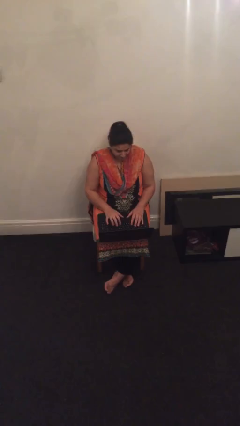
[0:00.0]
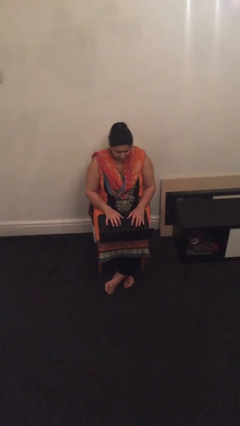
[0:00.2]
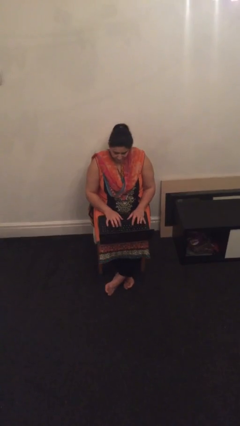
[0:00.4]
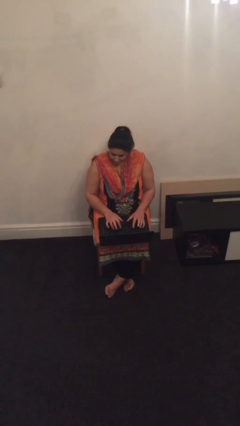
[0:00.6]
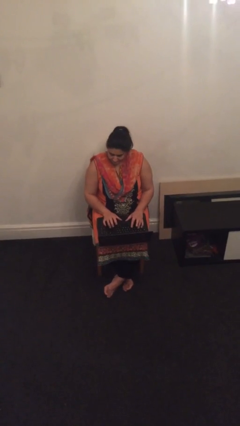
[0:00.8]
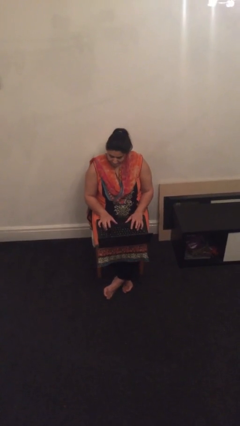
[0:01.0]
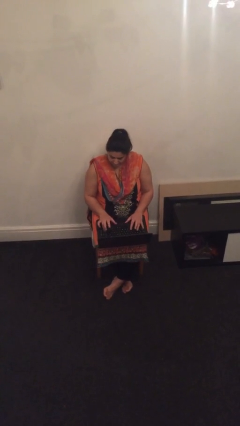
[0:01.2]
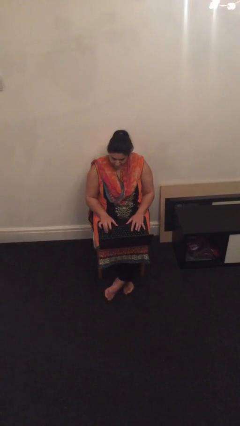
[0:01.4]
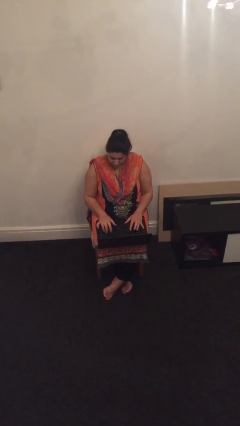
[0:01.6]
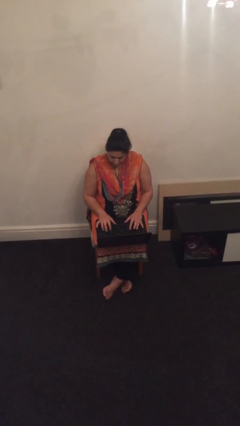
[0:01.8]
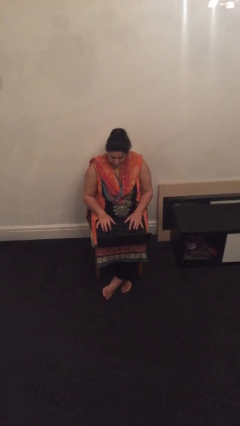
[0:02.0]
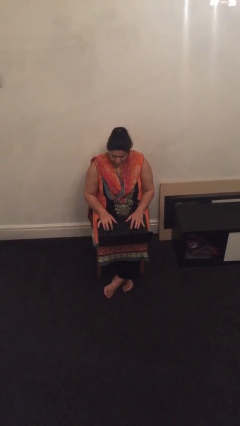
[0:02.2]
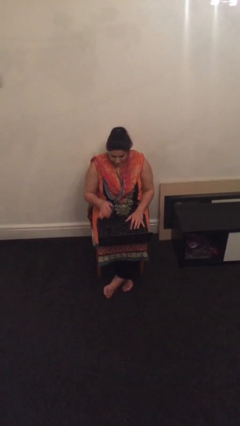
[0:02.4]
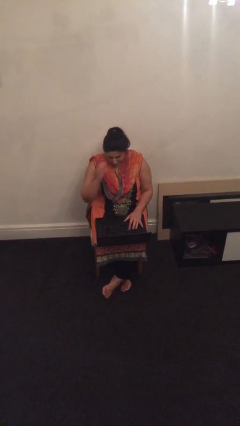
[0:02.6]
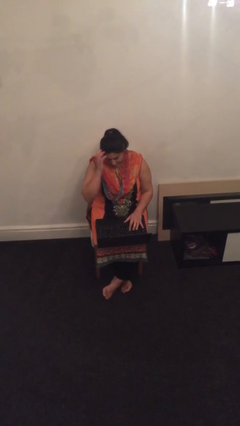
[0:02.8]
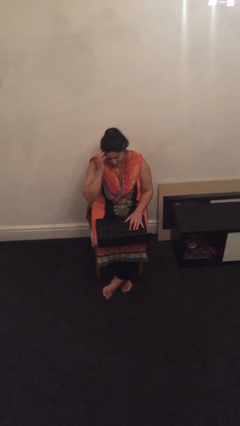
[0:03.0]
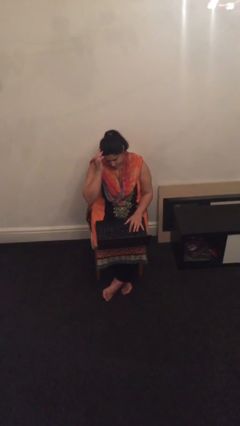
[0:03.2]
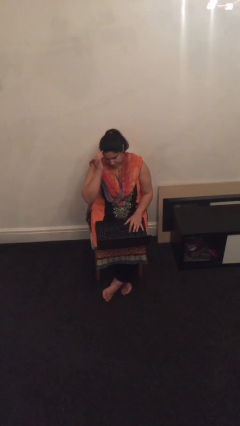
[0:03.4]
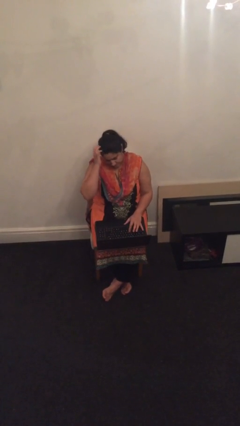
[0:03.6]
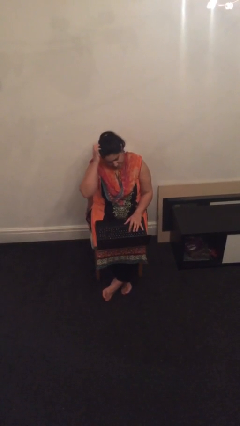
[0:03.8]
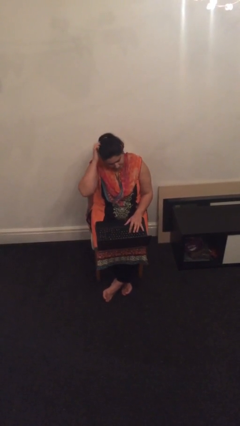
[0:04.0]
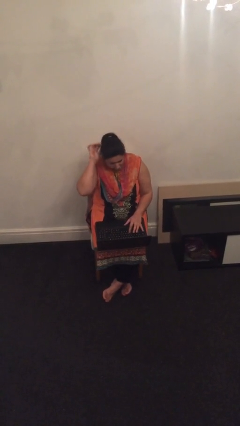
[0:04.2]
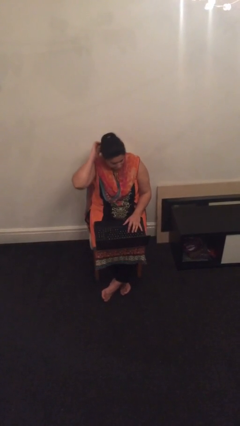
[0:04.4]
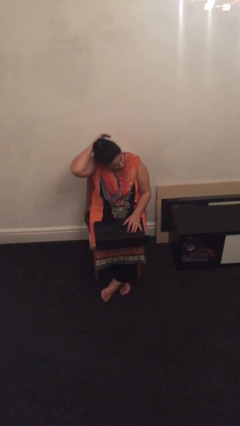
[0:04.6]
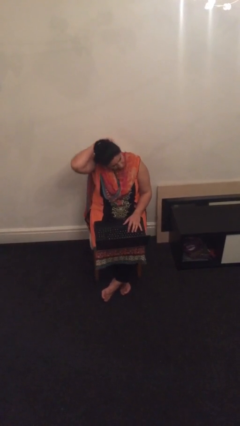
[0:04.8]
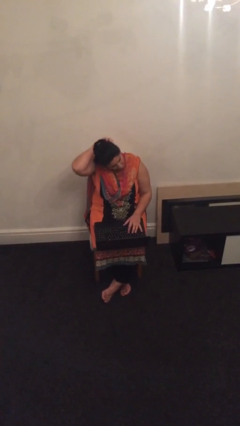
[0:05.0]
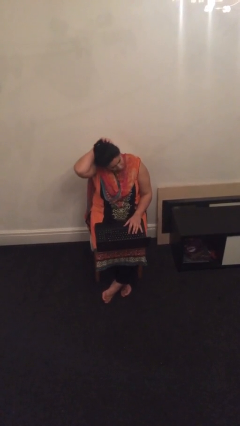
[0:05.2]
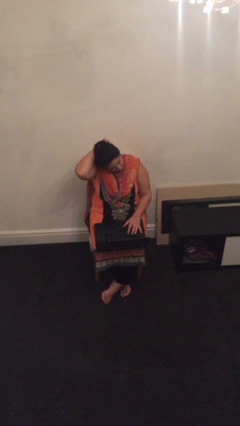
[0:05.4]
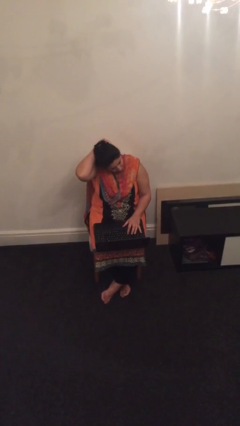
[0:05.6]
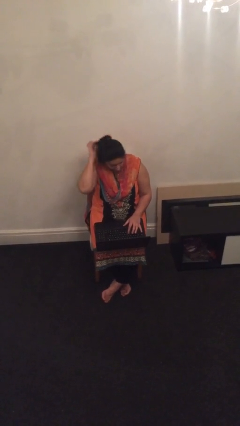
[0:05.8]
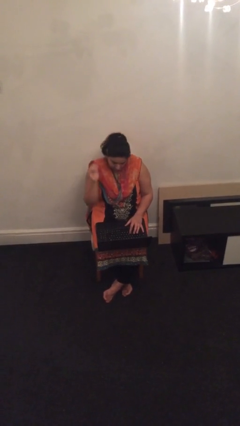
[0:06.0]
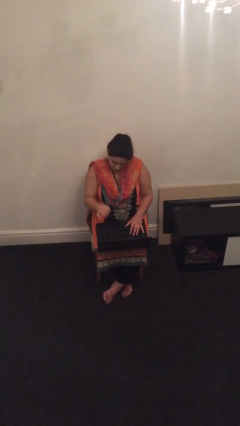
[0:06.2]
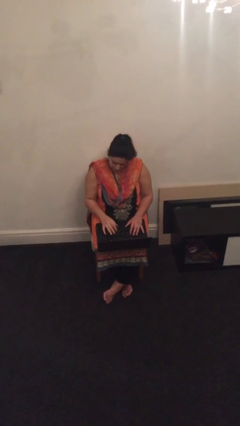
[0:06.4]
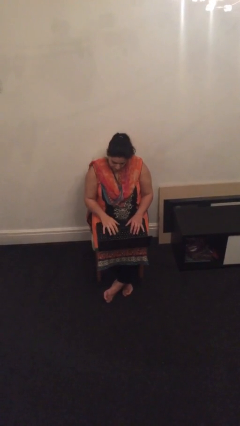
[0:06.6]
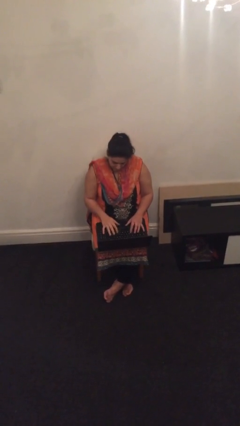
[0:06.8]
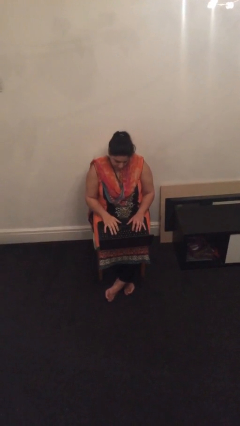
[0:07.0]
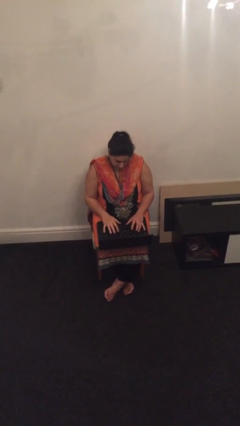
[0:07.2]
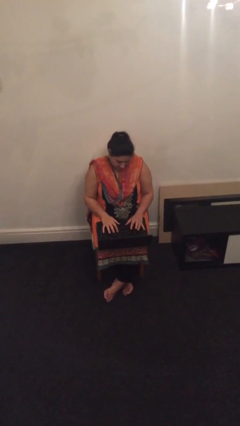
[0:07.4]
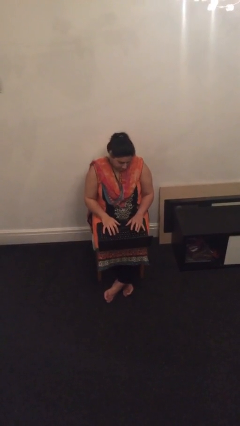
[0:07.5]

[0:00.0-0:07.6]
person interacts with laptop

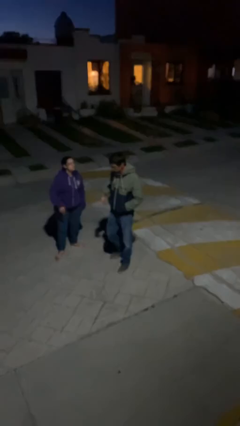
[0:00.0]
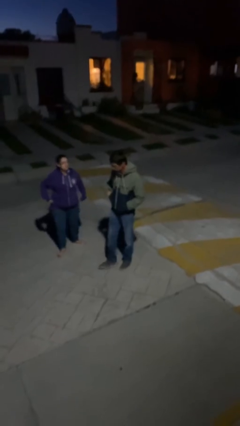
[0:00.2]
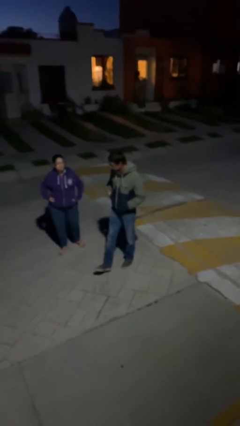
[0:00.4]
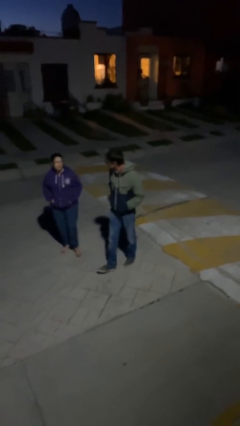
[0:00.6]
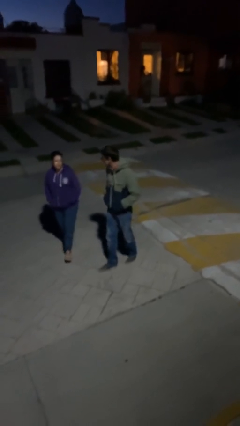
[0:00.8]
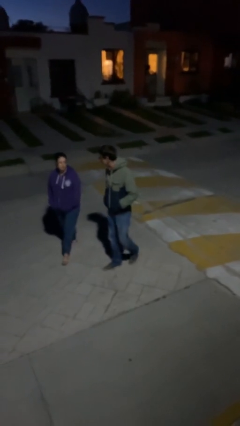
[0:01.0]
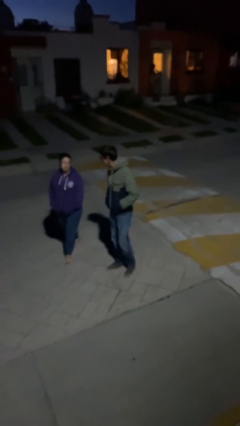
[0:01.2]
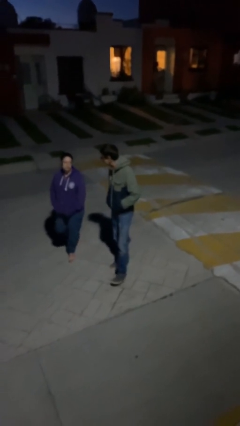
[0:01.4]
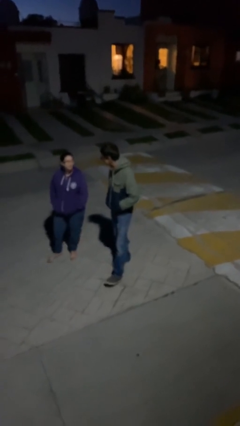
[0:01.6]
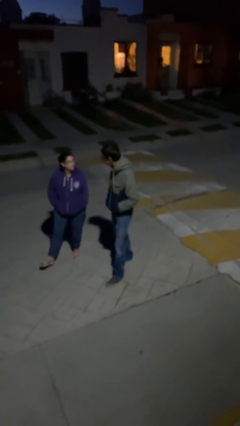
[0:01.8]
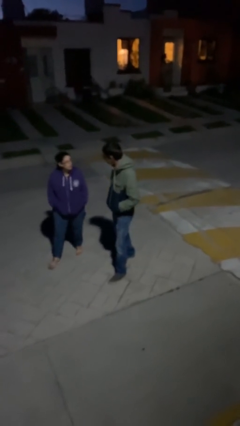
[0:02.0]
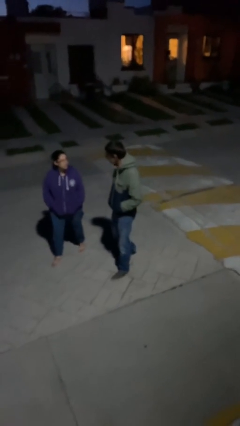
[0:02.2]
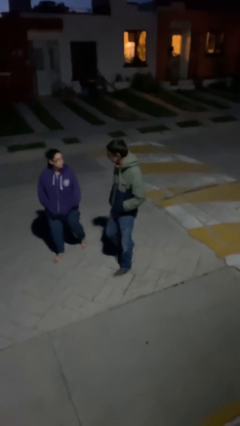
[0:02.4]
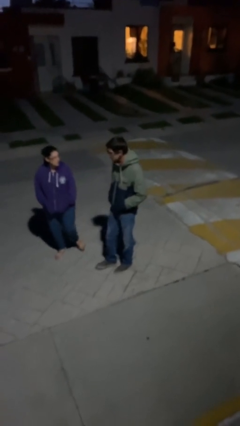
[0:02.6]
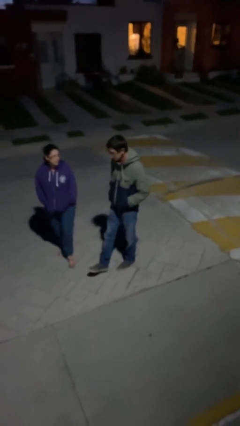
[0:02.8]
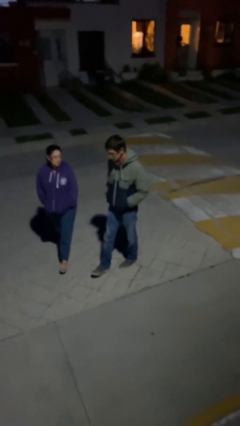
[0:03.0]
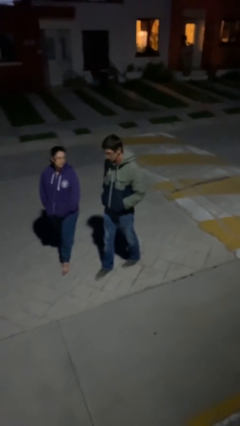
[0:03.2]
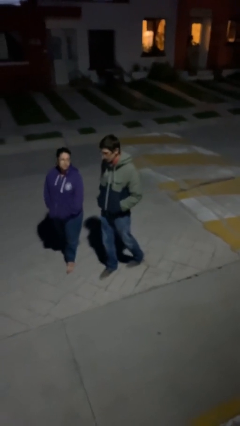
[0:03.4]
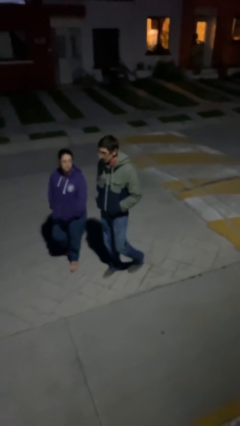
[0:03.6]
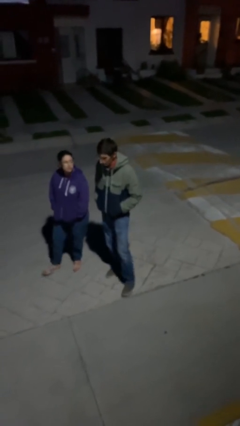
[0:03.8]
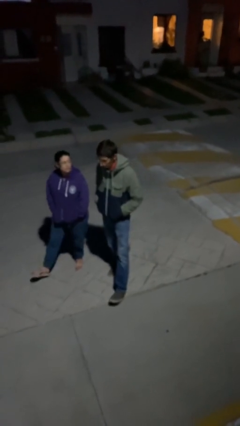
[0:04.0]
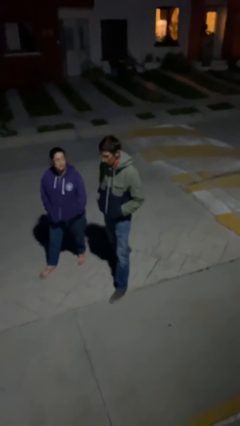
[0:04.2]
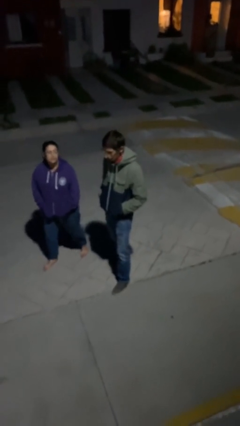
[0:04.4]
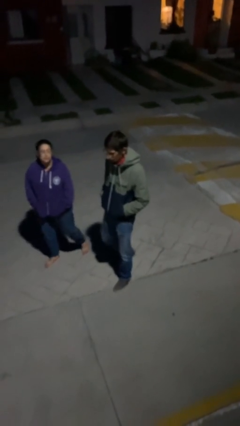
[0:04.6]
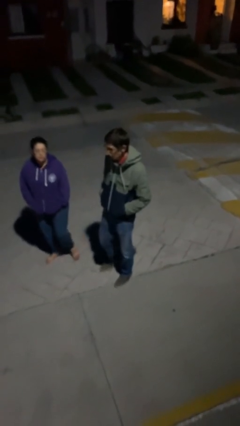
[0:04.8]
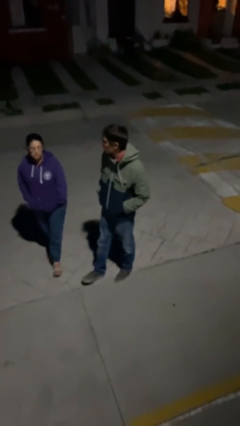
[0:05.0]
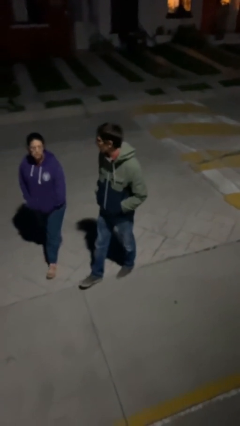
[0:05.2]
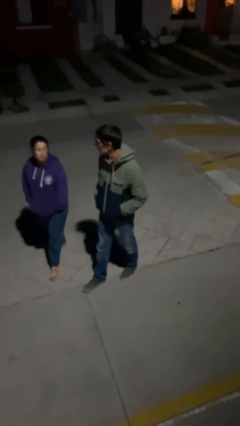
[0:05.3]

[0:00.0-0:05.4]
person talks to person

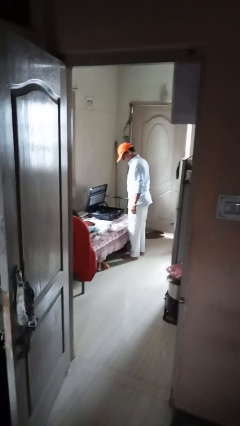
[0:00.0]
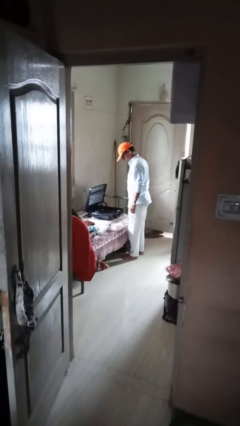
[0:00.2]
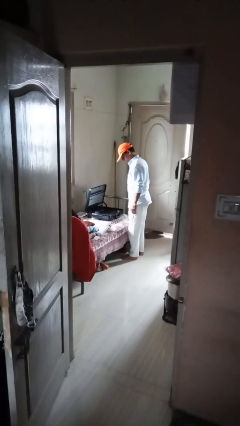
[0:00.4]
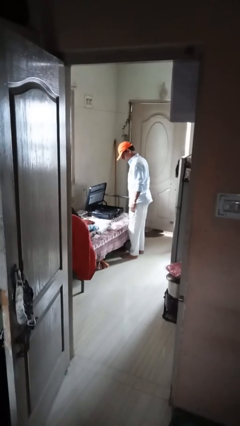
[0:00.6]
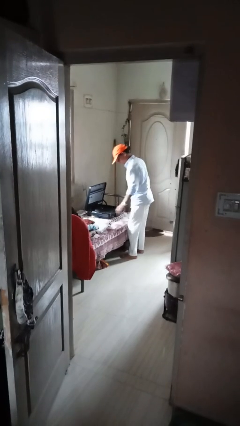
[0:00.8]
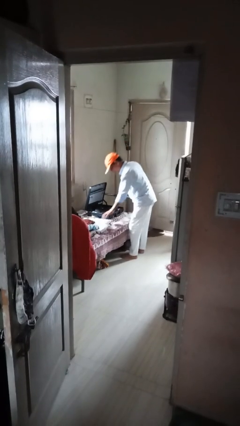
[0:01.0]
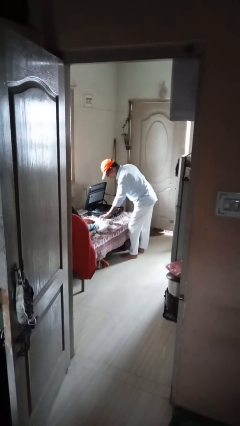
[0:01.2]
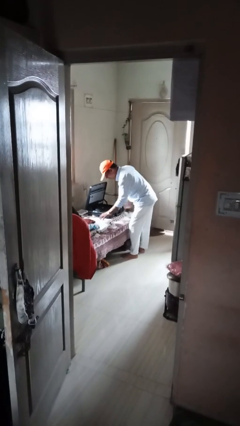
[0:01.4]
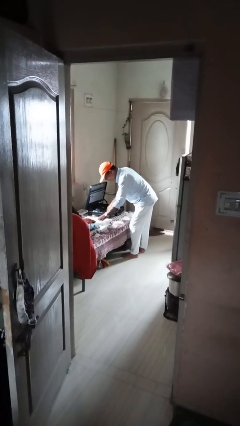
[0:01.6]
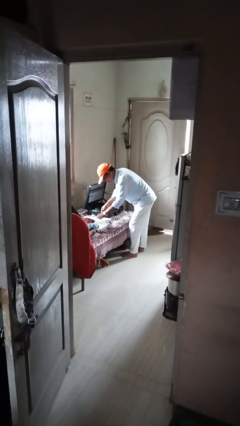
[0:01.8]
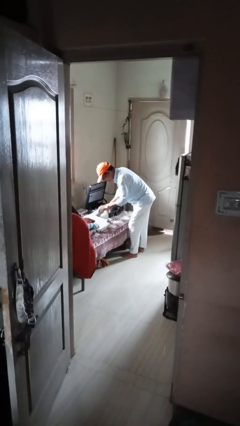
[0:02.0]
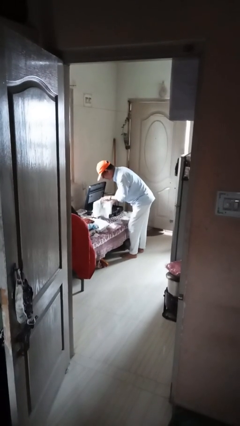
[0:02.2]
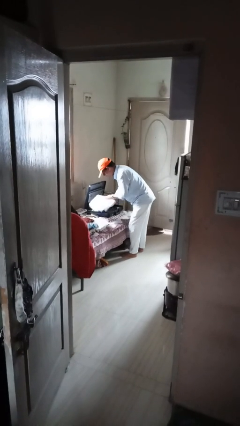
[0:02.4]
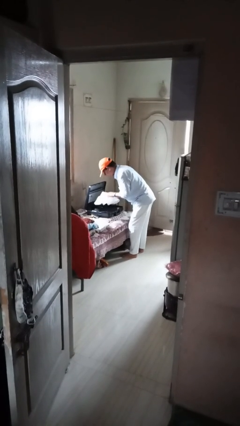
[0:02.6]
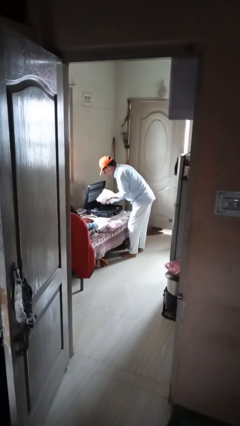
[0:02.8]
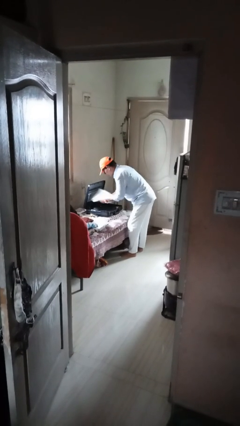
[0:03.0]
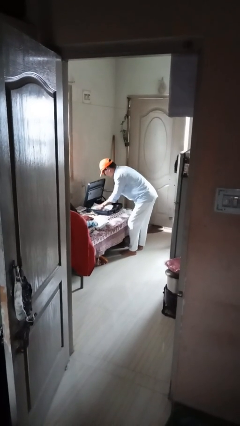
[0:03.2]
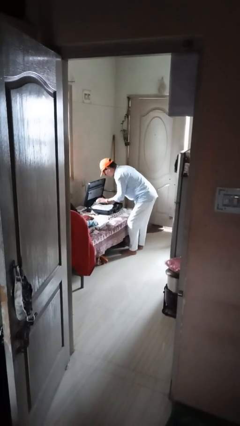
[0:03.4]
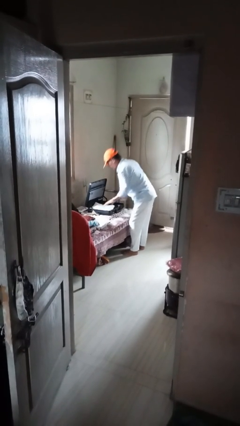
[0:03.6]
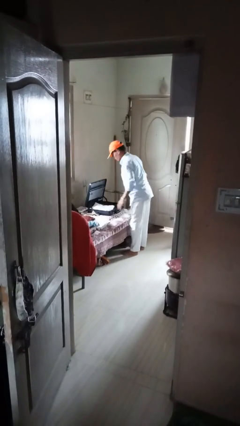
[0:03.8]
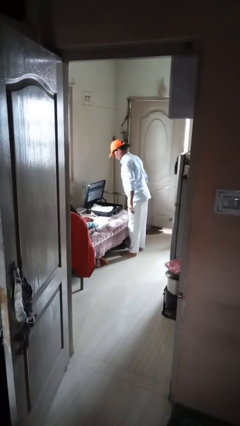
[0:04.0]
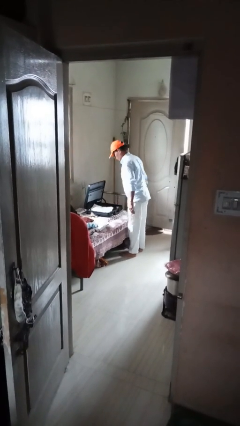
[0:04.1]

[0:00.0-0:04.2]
person loads clothes into suitcase

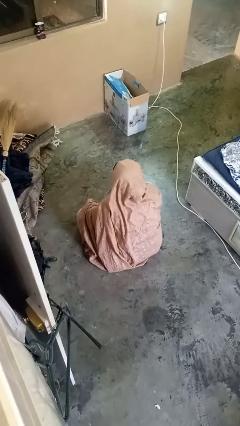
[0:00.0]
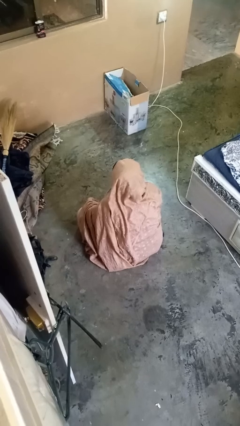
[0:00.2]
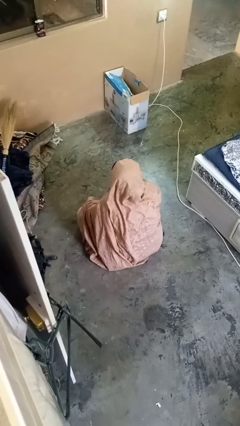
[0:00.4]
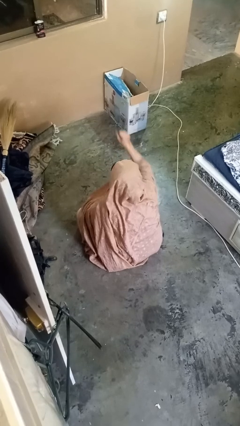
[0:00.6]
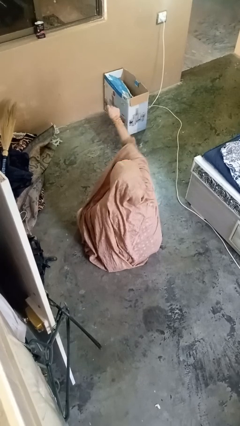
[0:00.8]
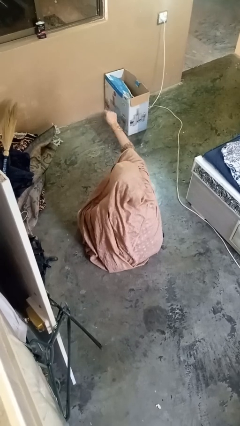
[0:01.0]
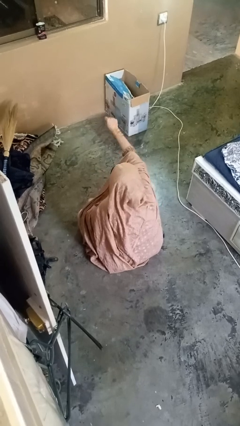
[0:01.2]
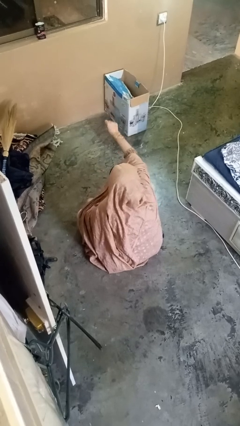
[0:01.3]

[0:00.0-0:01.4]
person punches
